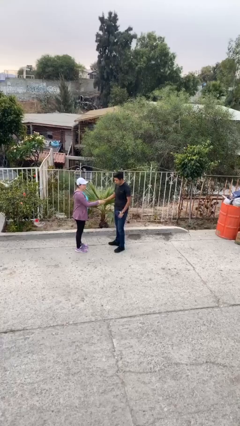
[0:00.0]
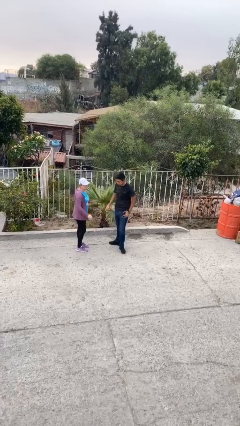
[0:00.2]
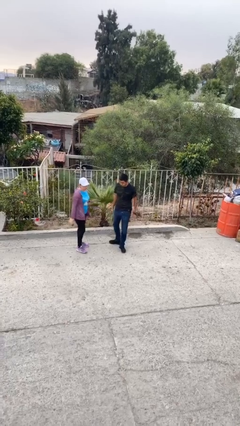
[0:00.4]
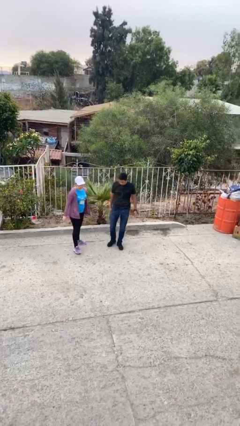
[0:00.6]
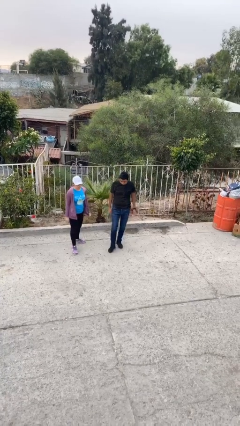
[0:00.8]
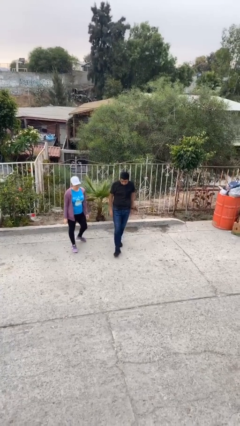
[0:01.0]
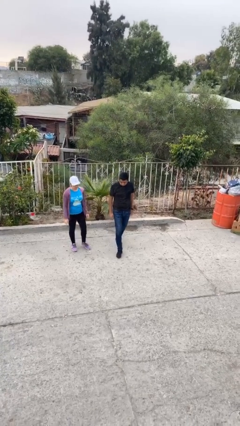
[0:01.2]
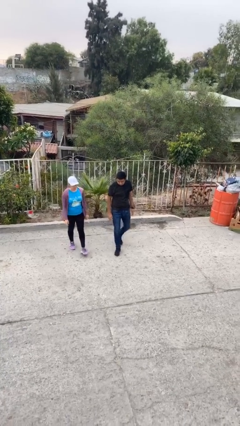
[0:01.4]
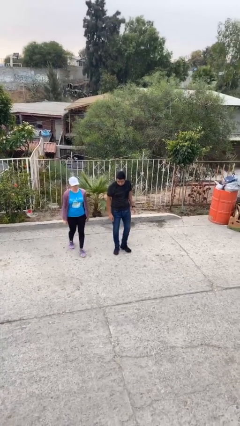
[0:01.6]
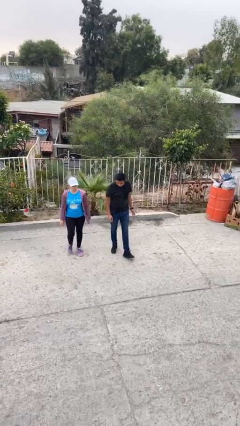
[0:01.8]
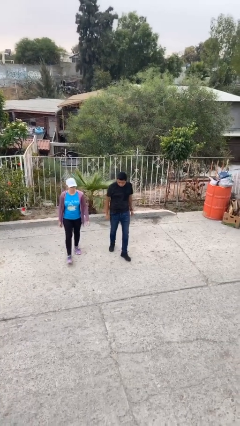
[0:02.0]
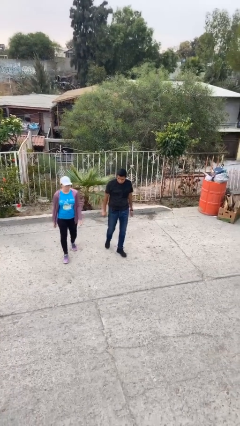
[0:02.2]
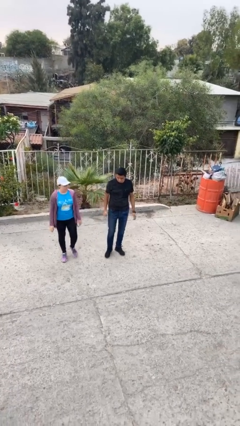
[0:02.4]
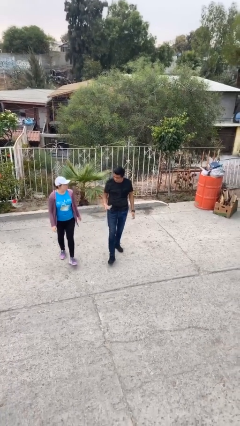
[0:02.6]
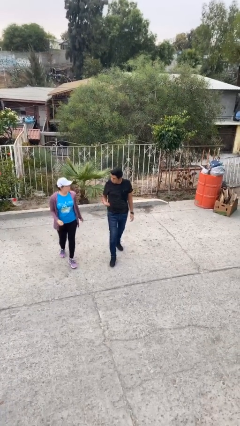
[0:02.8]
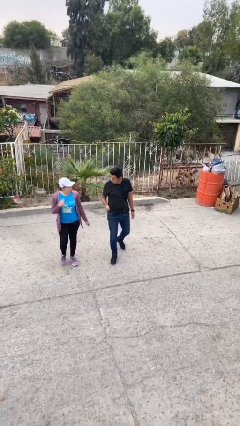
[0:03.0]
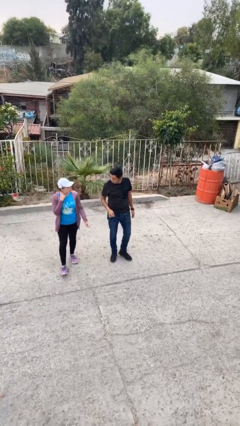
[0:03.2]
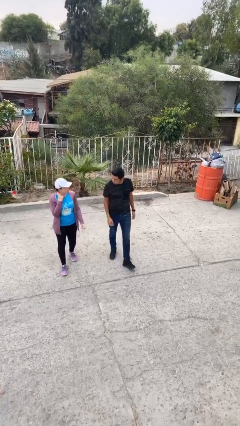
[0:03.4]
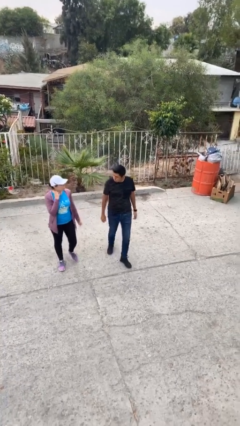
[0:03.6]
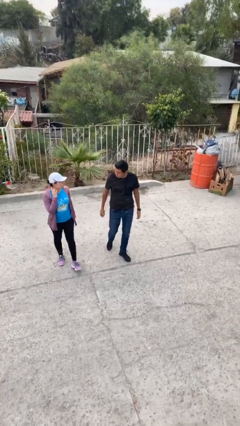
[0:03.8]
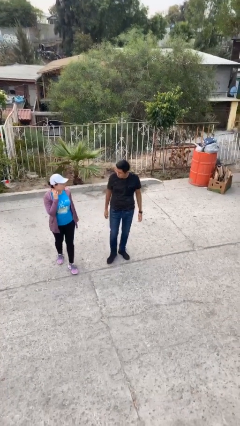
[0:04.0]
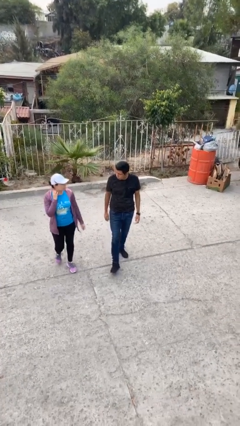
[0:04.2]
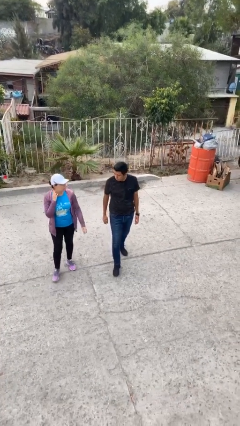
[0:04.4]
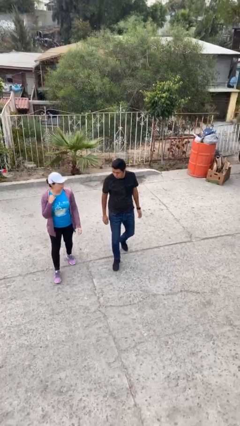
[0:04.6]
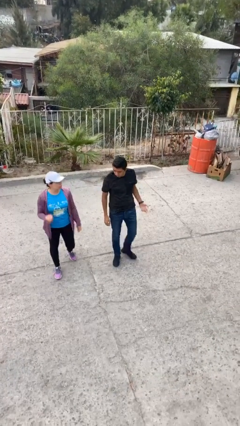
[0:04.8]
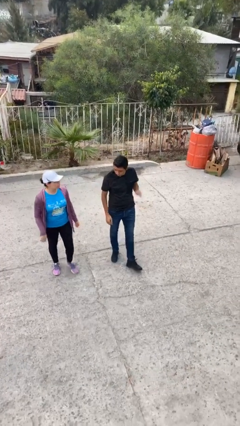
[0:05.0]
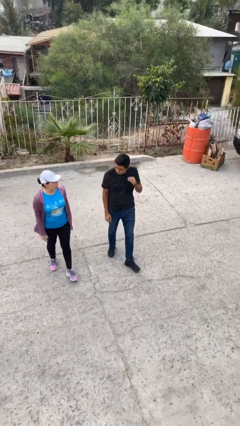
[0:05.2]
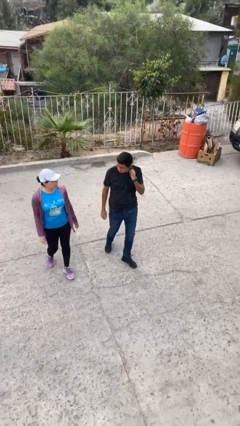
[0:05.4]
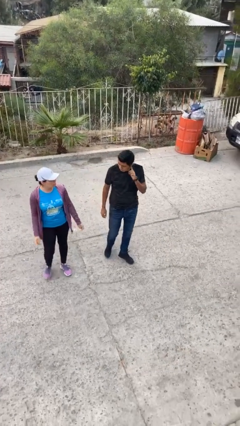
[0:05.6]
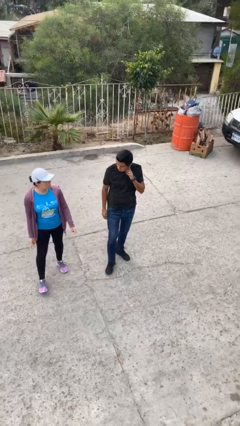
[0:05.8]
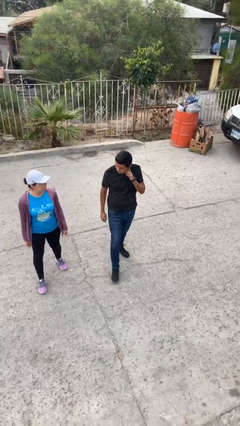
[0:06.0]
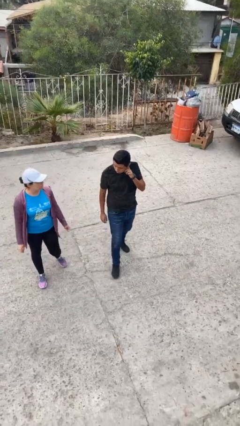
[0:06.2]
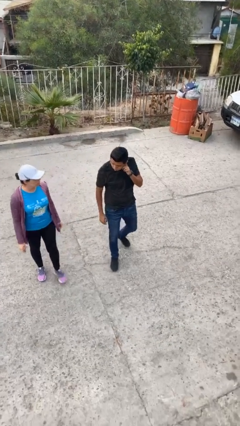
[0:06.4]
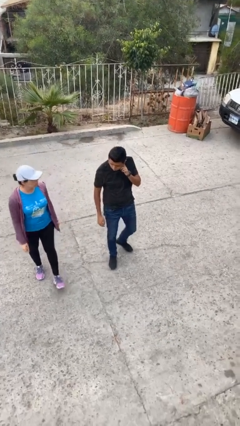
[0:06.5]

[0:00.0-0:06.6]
person talks to person

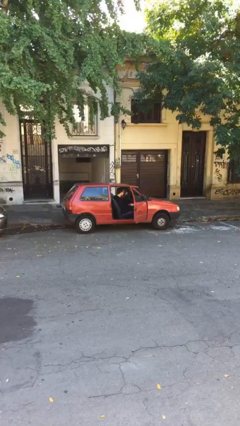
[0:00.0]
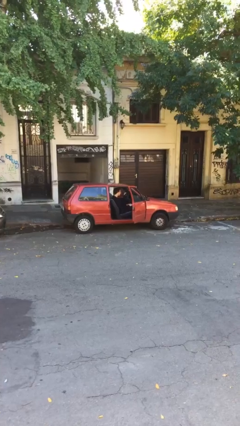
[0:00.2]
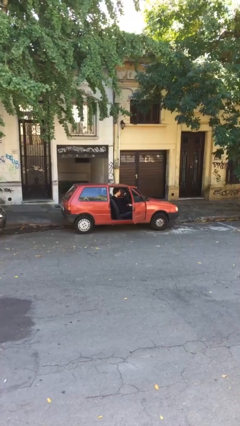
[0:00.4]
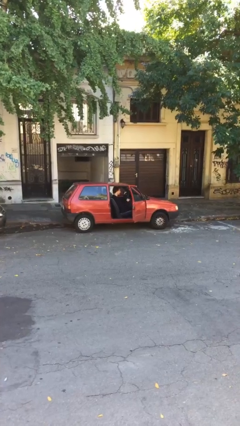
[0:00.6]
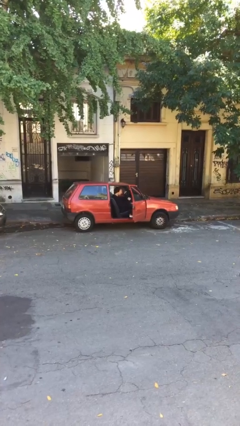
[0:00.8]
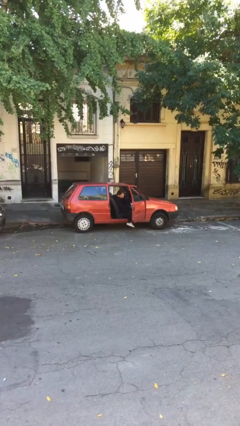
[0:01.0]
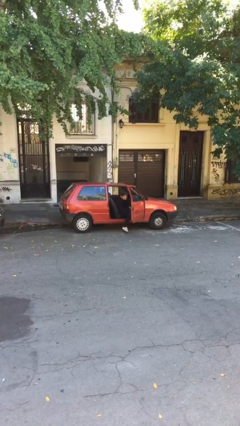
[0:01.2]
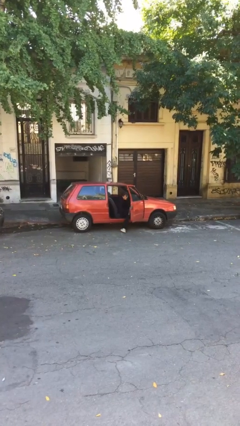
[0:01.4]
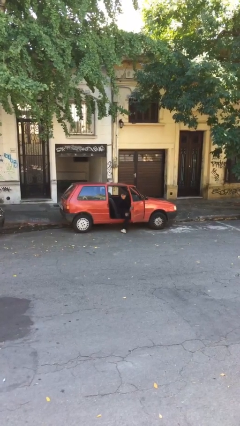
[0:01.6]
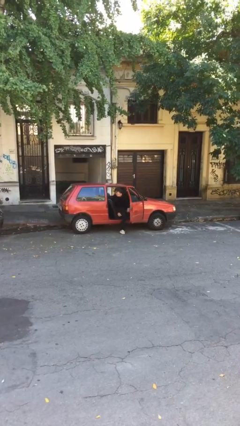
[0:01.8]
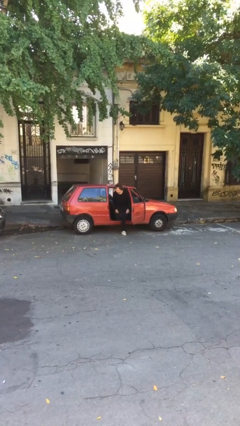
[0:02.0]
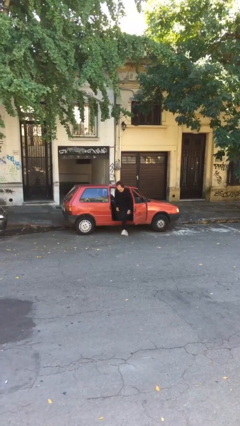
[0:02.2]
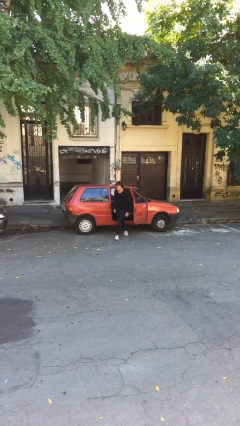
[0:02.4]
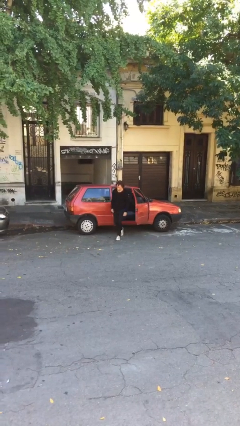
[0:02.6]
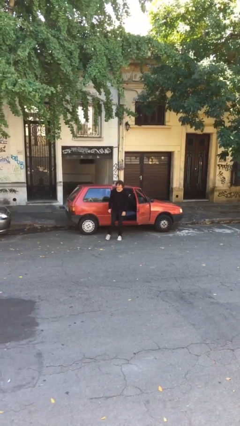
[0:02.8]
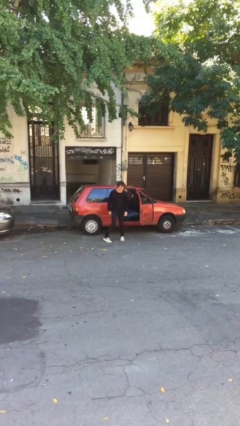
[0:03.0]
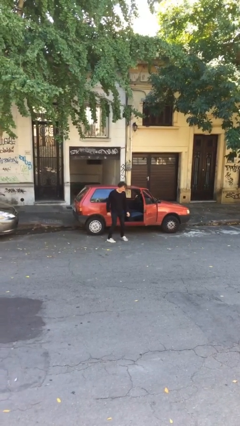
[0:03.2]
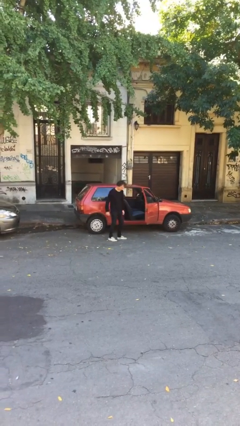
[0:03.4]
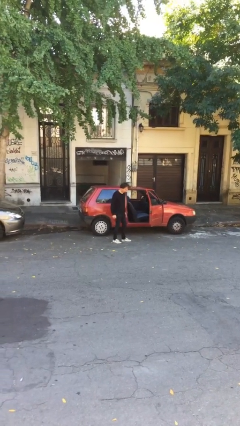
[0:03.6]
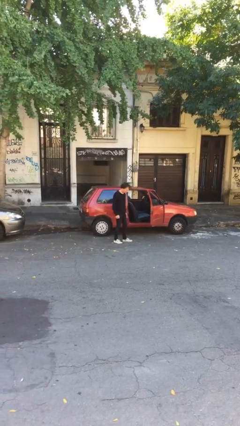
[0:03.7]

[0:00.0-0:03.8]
person exits car

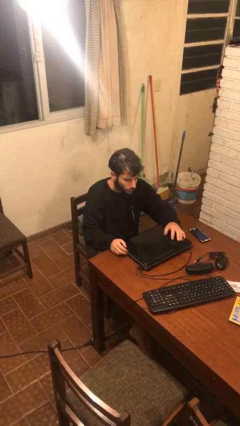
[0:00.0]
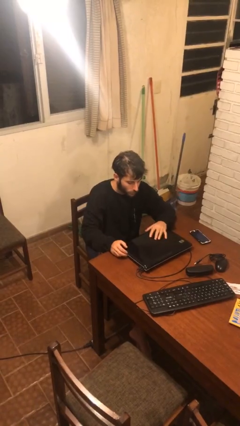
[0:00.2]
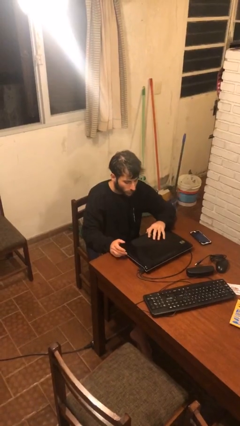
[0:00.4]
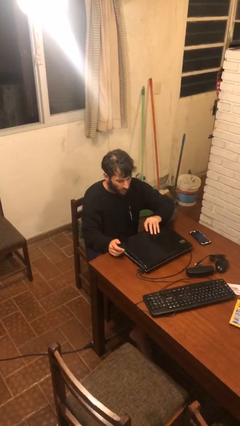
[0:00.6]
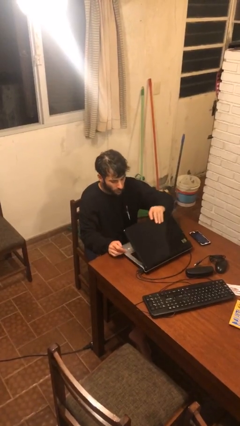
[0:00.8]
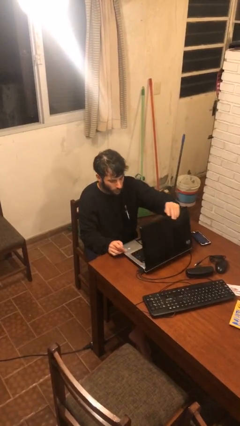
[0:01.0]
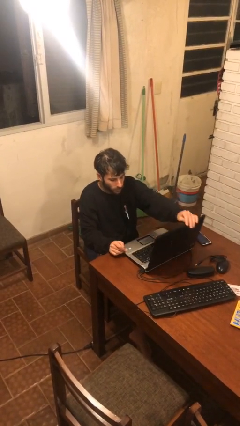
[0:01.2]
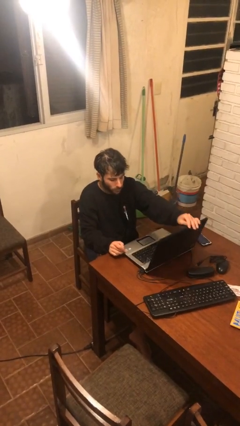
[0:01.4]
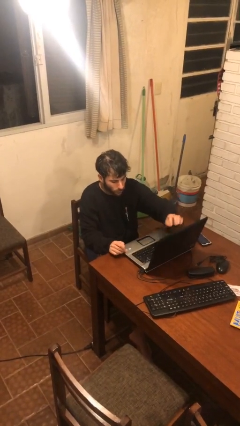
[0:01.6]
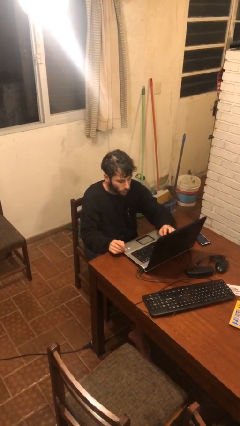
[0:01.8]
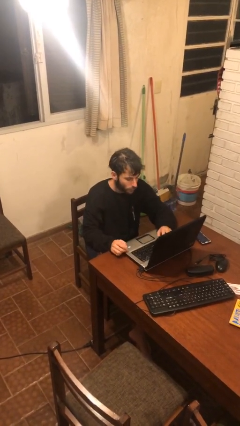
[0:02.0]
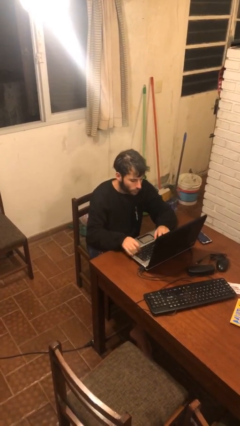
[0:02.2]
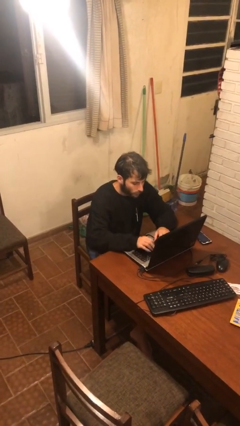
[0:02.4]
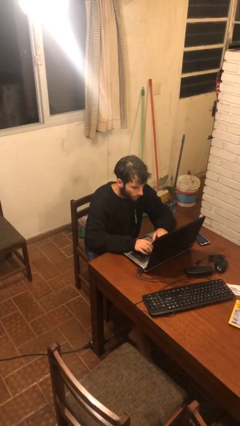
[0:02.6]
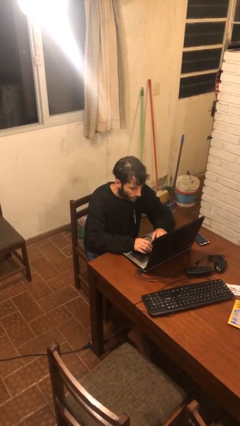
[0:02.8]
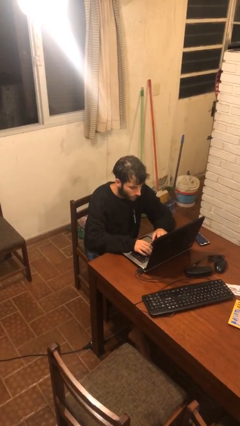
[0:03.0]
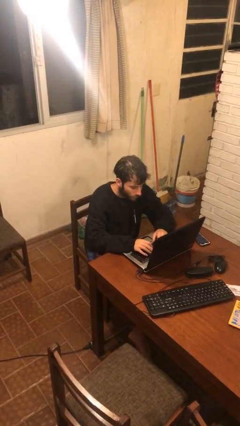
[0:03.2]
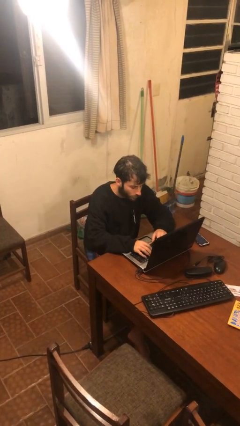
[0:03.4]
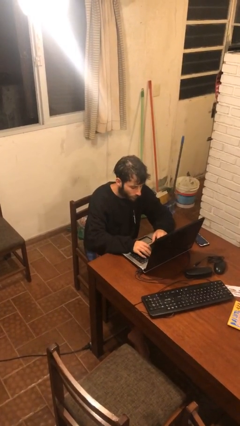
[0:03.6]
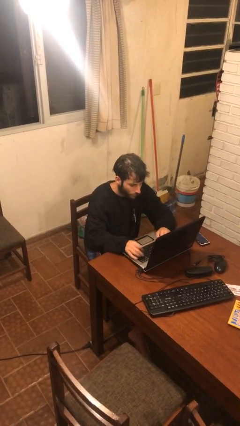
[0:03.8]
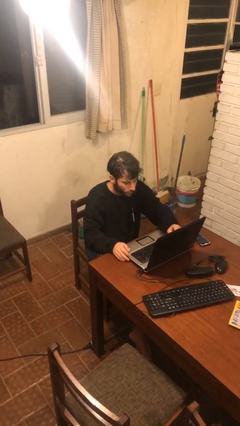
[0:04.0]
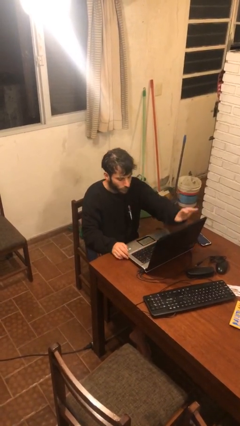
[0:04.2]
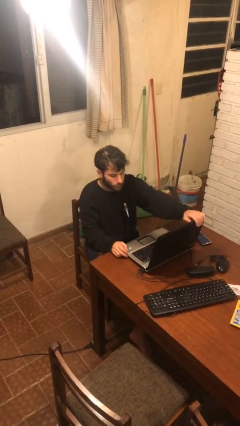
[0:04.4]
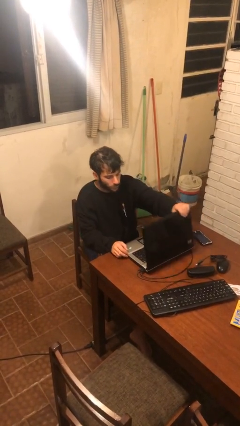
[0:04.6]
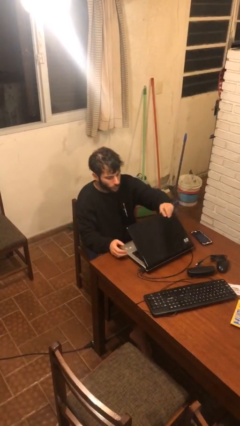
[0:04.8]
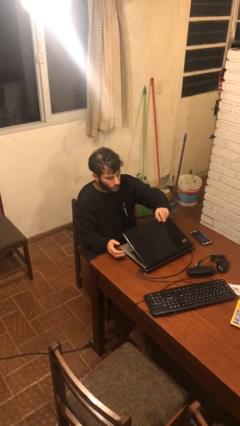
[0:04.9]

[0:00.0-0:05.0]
person interacts with laptop

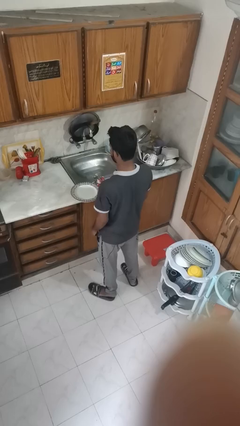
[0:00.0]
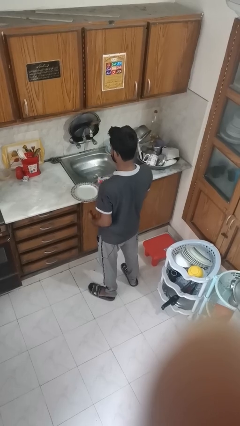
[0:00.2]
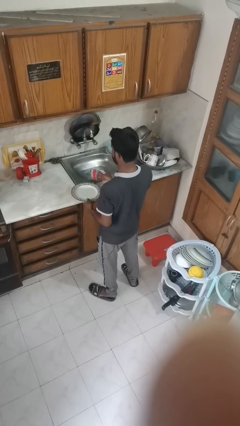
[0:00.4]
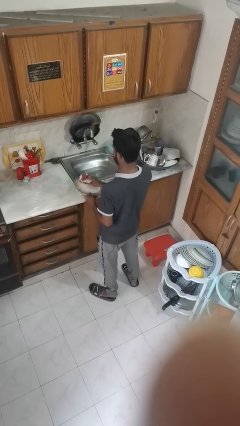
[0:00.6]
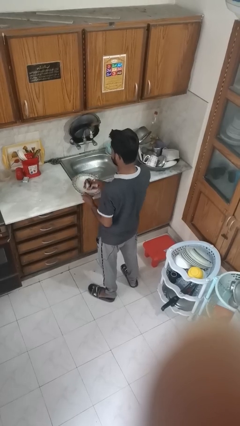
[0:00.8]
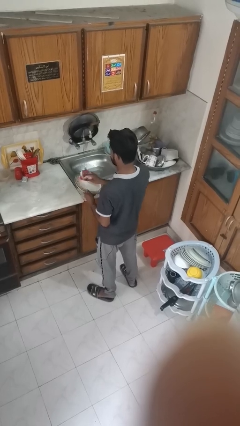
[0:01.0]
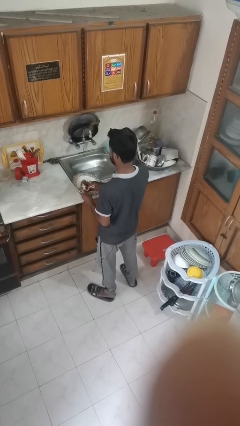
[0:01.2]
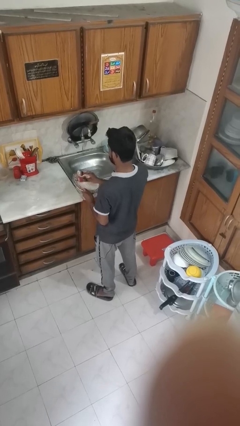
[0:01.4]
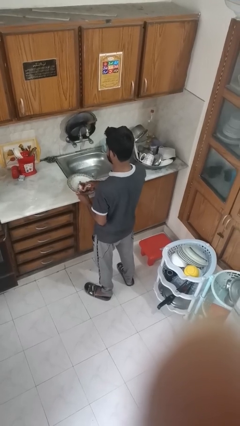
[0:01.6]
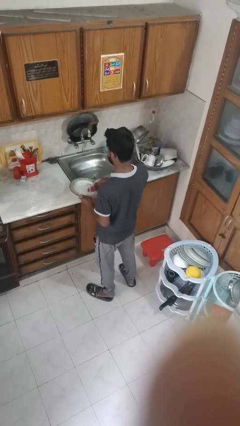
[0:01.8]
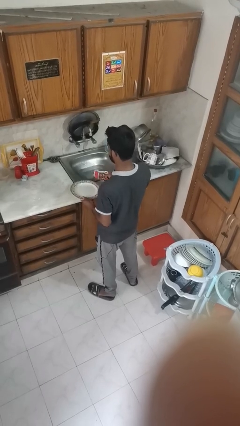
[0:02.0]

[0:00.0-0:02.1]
person dries dish
